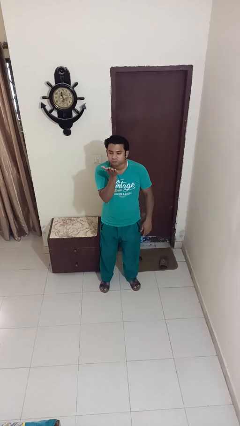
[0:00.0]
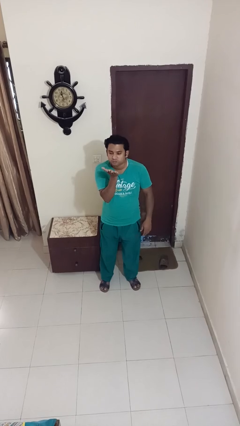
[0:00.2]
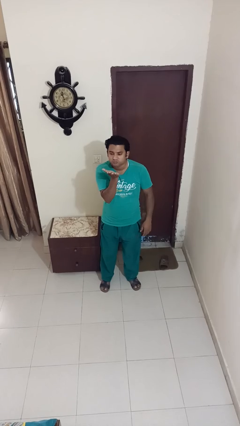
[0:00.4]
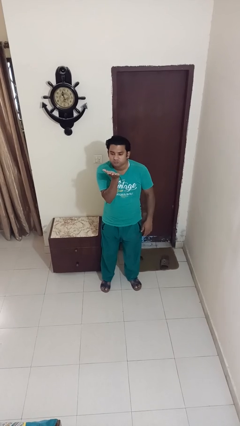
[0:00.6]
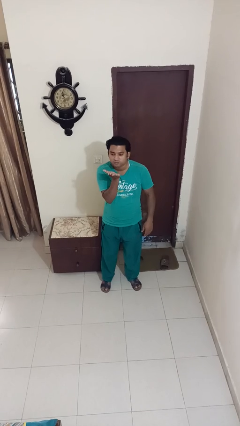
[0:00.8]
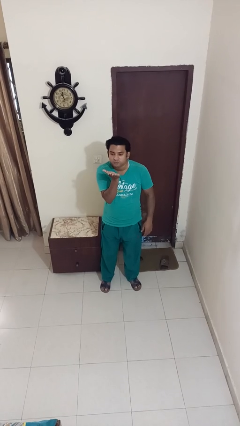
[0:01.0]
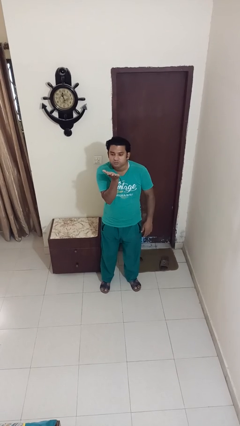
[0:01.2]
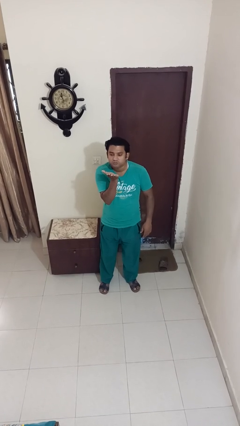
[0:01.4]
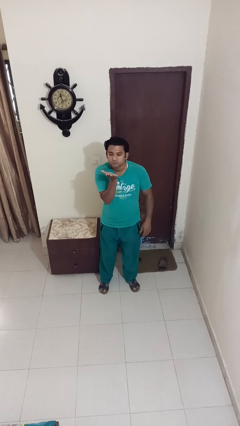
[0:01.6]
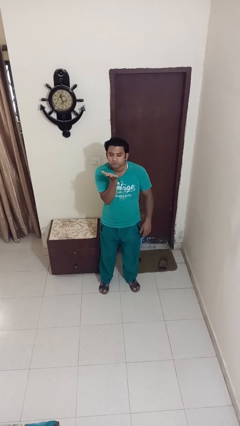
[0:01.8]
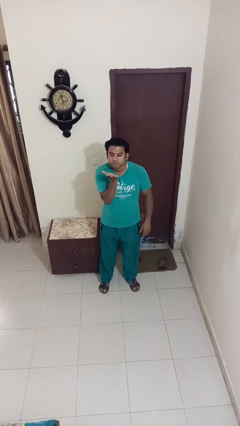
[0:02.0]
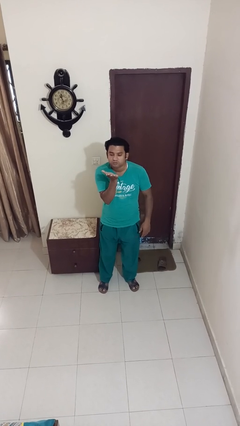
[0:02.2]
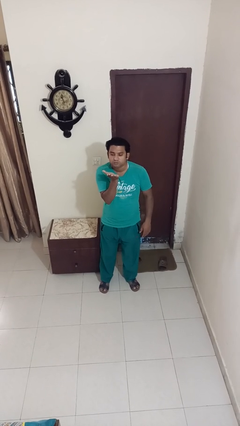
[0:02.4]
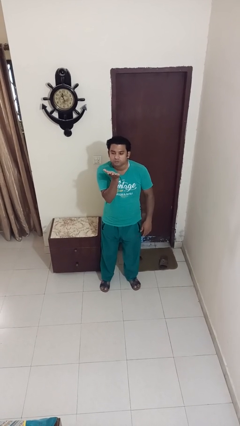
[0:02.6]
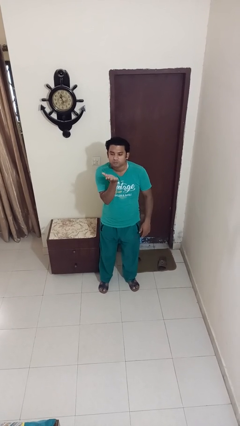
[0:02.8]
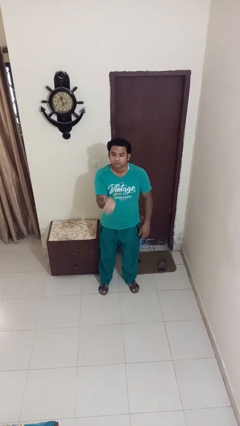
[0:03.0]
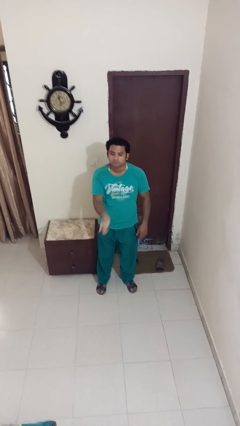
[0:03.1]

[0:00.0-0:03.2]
person gestures blow kiss

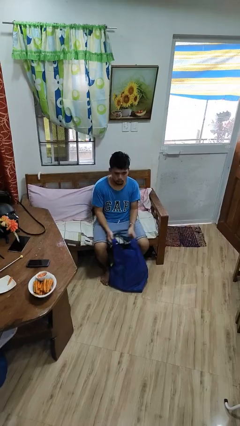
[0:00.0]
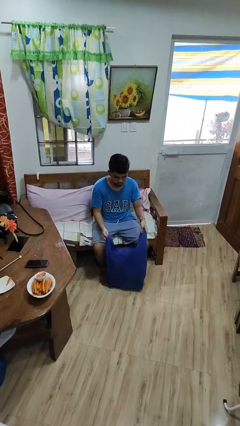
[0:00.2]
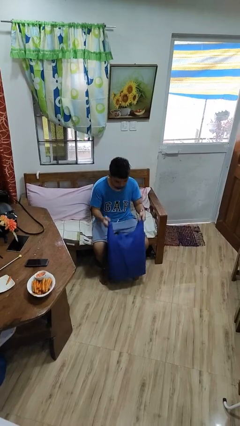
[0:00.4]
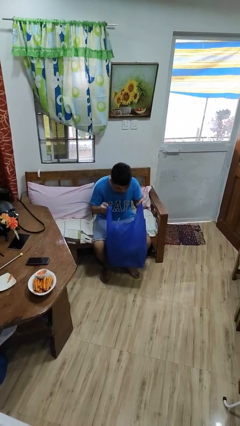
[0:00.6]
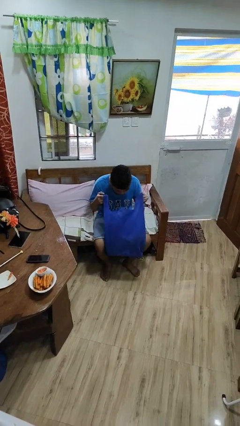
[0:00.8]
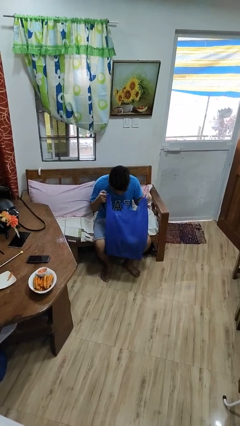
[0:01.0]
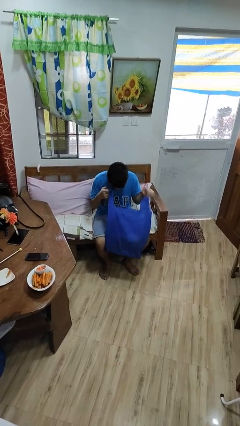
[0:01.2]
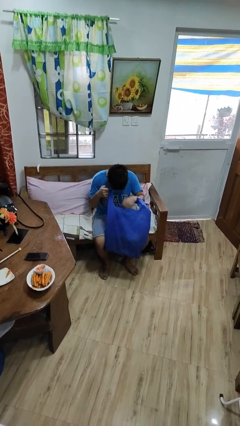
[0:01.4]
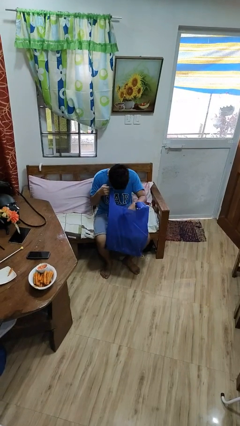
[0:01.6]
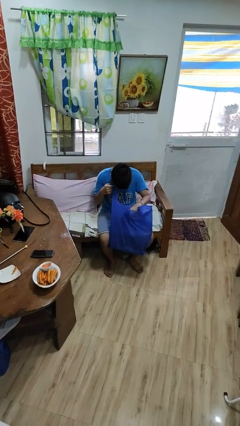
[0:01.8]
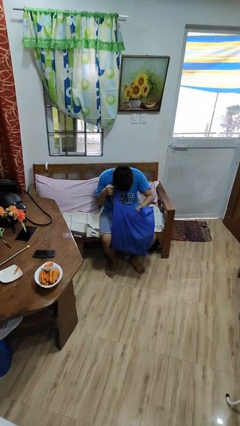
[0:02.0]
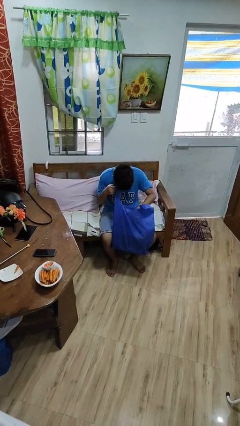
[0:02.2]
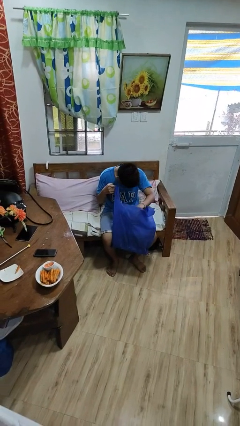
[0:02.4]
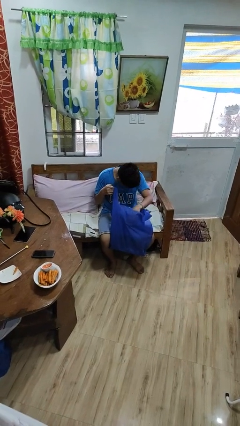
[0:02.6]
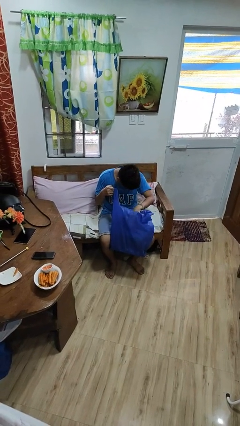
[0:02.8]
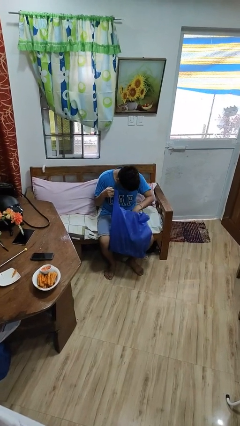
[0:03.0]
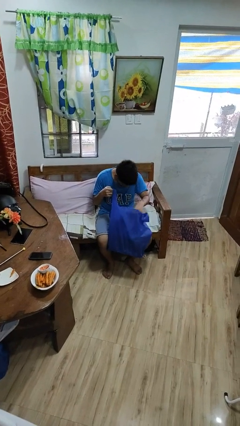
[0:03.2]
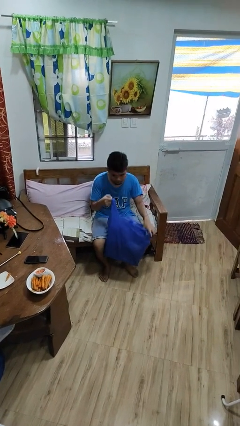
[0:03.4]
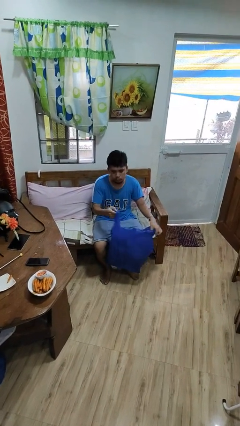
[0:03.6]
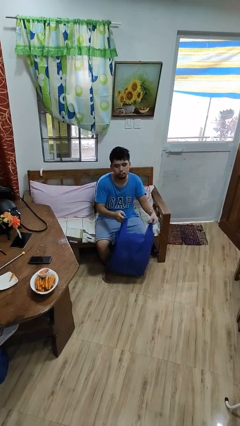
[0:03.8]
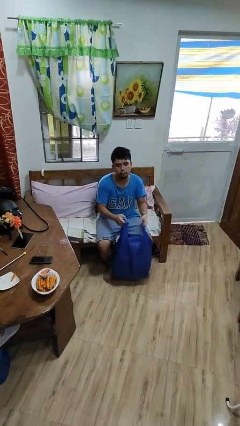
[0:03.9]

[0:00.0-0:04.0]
person searches in bag

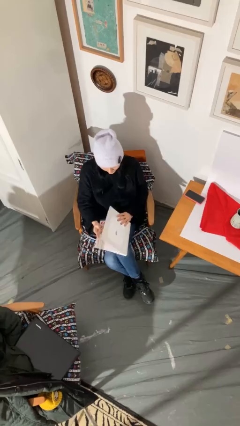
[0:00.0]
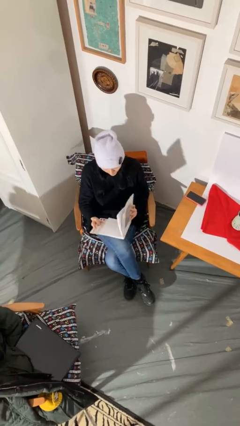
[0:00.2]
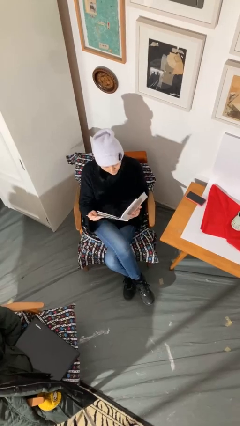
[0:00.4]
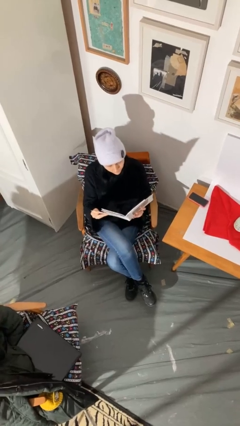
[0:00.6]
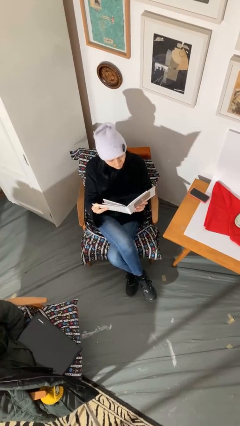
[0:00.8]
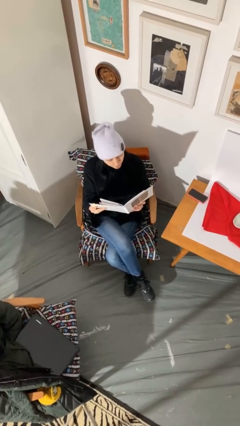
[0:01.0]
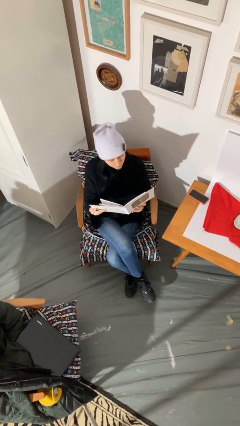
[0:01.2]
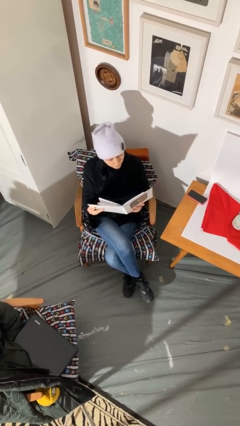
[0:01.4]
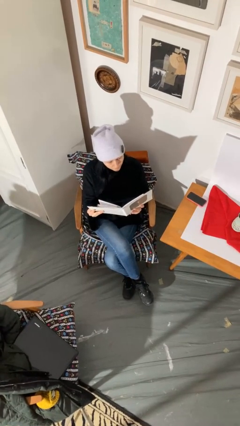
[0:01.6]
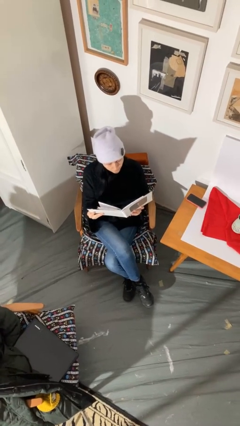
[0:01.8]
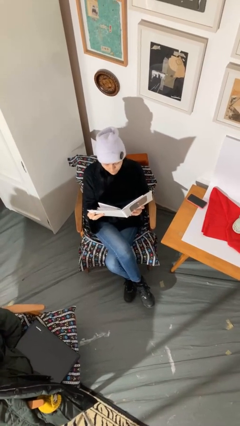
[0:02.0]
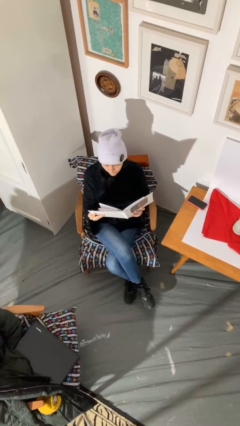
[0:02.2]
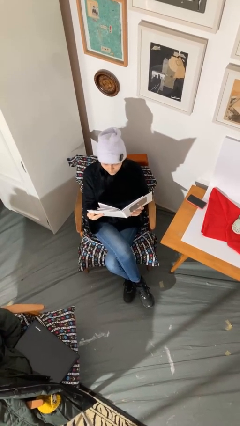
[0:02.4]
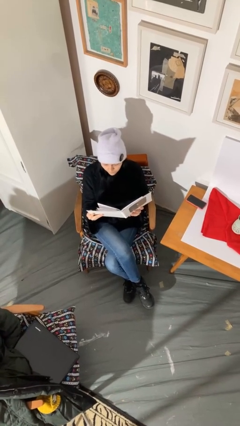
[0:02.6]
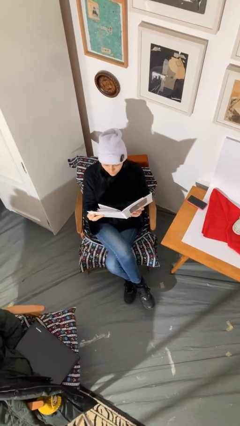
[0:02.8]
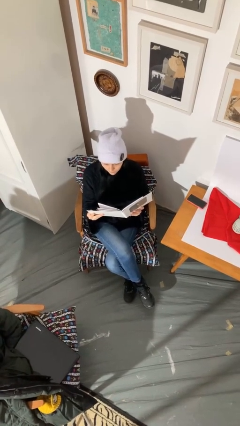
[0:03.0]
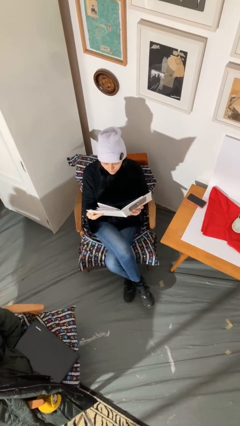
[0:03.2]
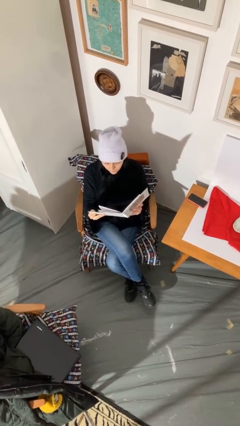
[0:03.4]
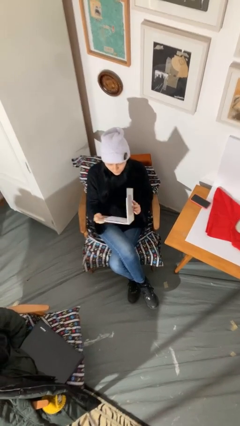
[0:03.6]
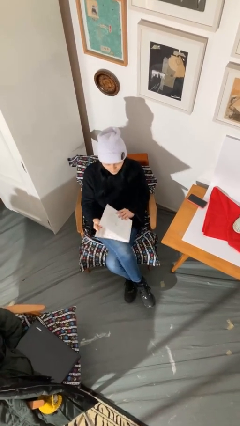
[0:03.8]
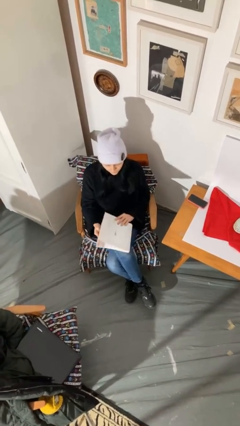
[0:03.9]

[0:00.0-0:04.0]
person reads document

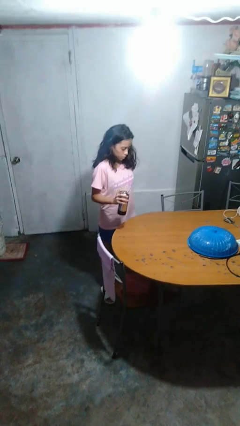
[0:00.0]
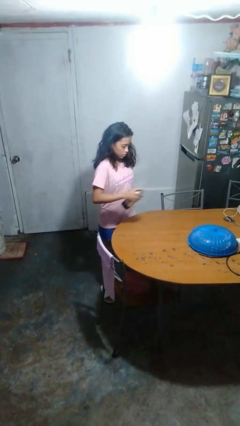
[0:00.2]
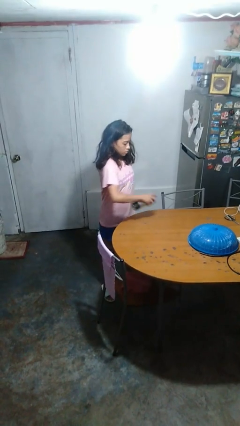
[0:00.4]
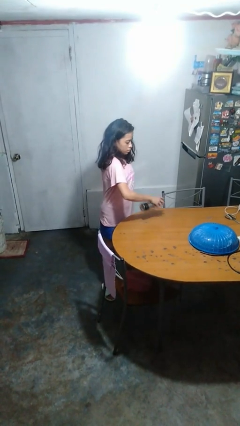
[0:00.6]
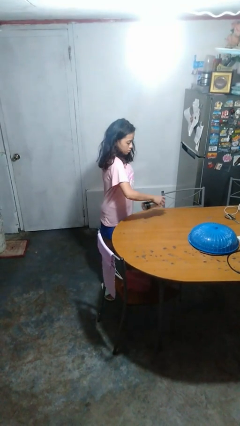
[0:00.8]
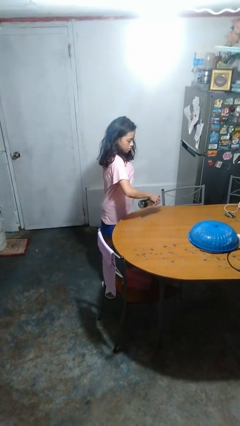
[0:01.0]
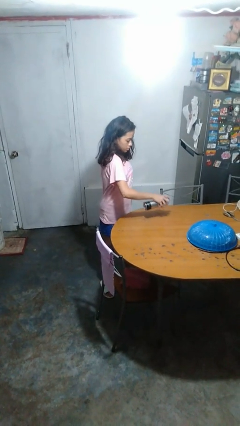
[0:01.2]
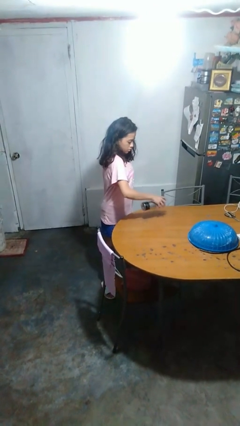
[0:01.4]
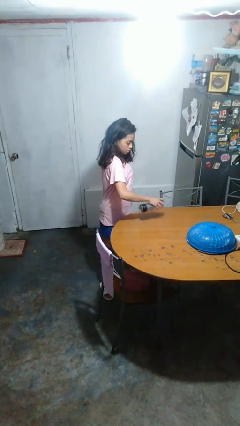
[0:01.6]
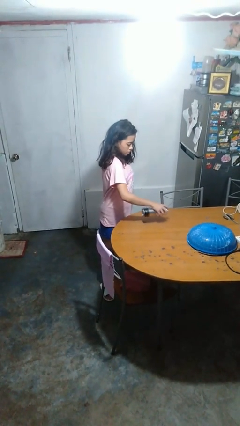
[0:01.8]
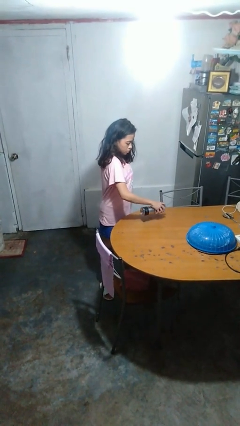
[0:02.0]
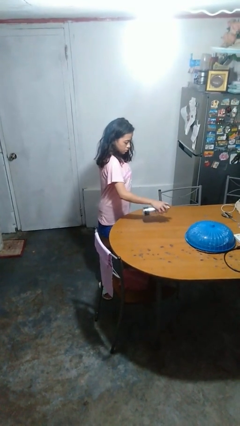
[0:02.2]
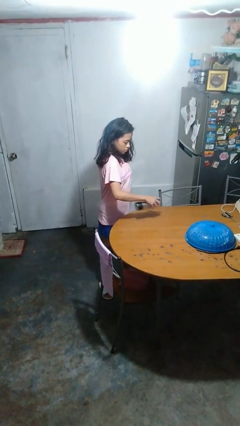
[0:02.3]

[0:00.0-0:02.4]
person sprays from bottle

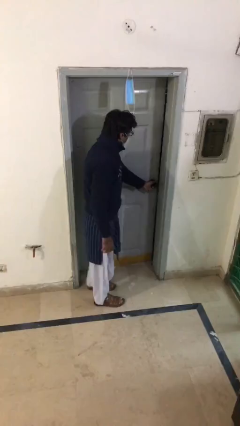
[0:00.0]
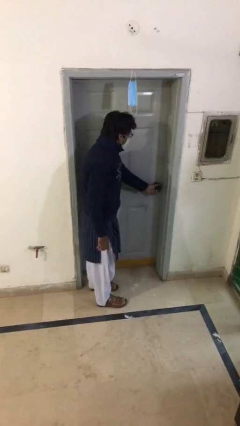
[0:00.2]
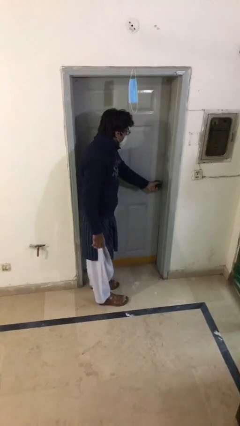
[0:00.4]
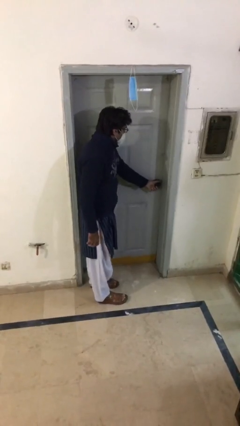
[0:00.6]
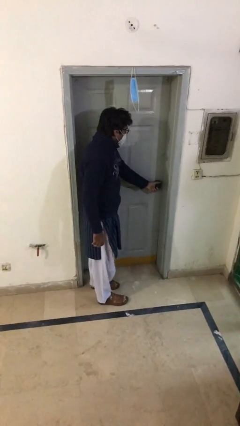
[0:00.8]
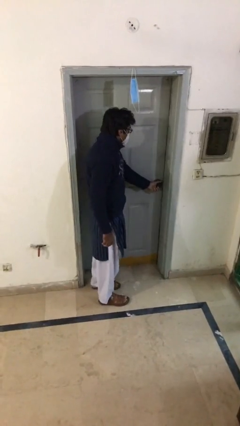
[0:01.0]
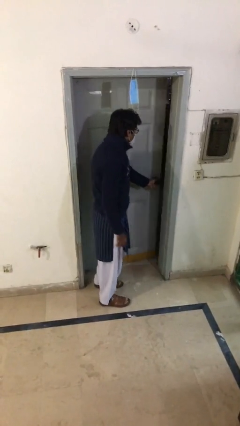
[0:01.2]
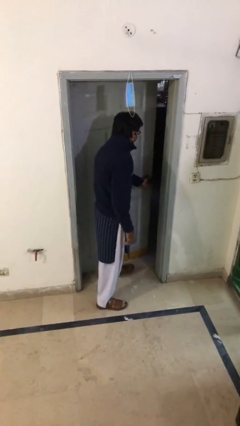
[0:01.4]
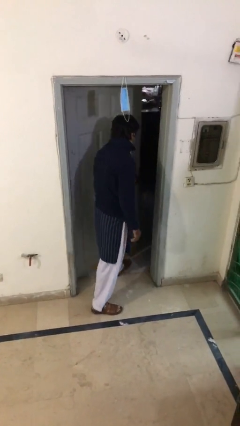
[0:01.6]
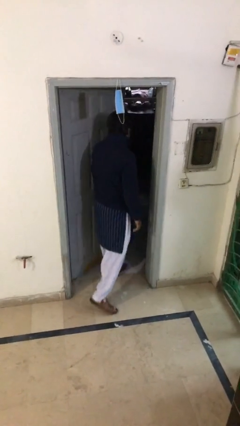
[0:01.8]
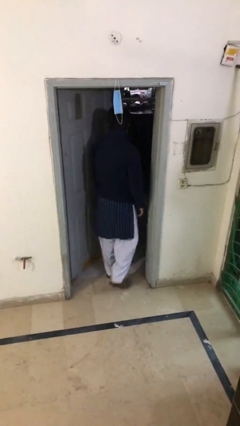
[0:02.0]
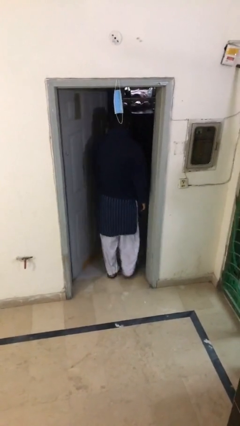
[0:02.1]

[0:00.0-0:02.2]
person opens facility door

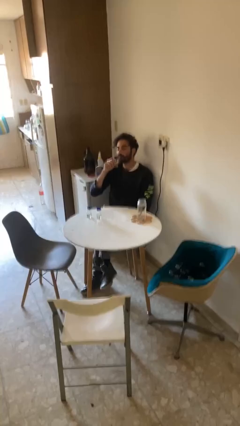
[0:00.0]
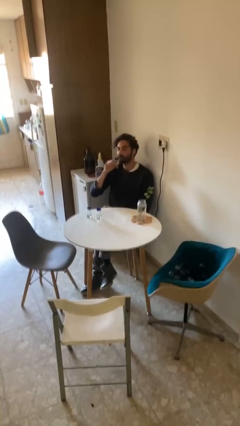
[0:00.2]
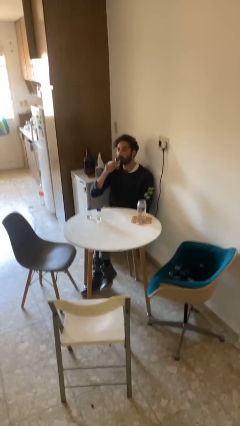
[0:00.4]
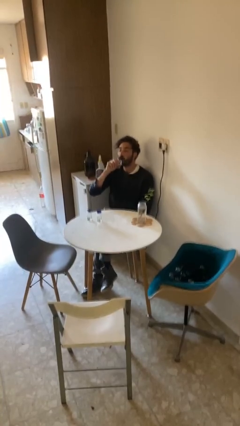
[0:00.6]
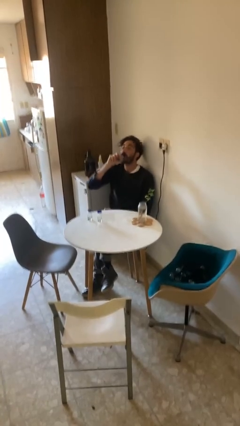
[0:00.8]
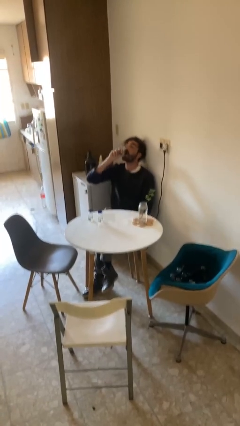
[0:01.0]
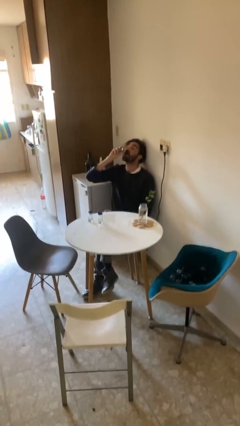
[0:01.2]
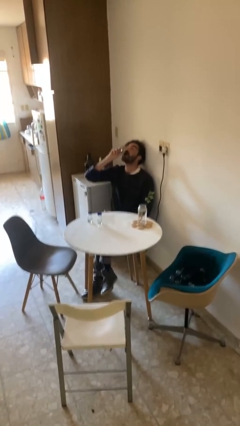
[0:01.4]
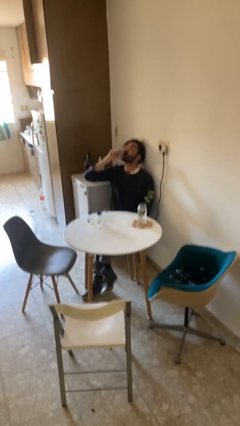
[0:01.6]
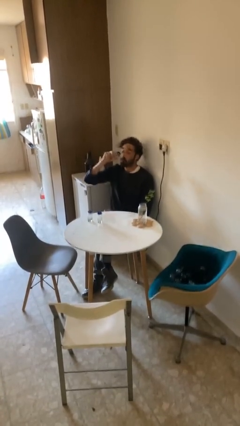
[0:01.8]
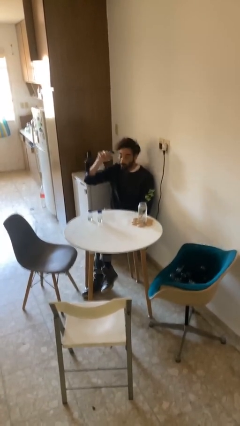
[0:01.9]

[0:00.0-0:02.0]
person drinks from shotglass
